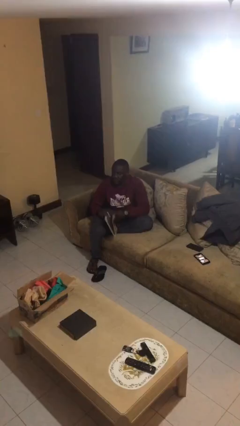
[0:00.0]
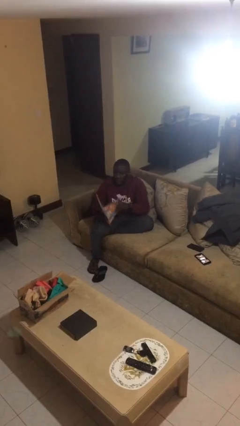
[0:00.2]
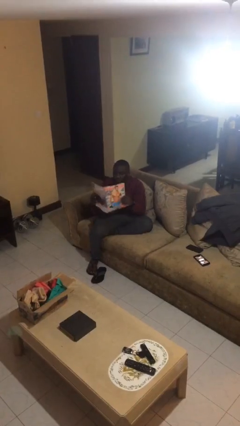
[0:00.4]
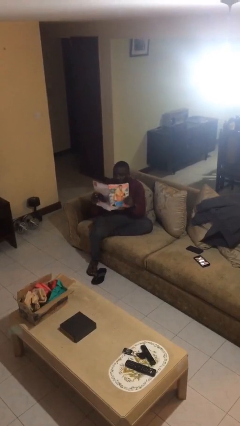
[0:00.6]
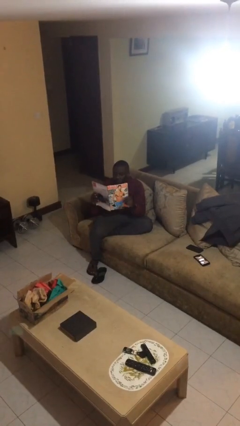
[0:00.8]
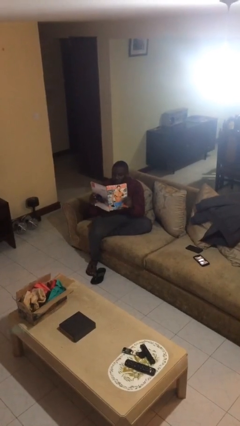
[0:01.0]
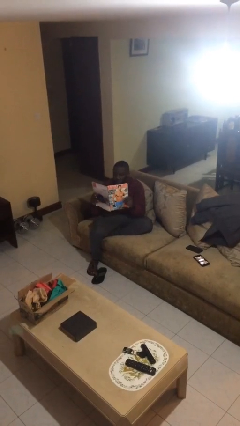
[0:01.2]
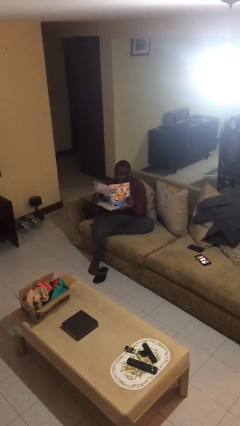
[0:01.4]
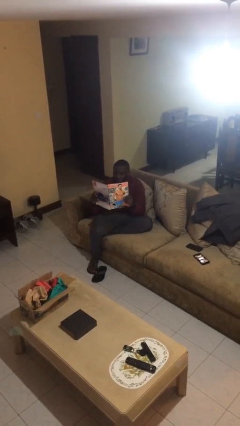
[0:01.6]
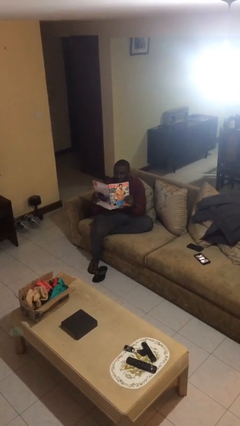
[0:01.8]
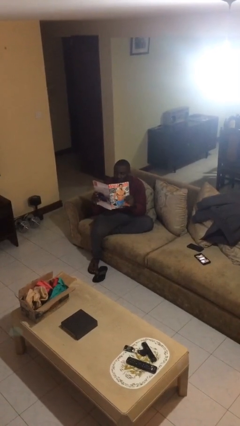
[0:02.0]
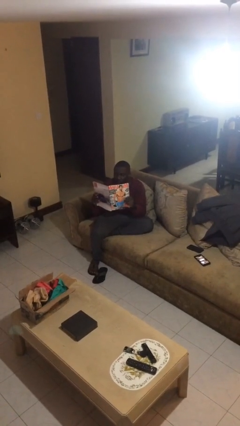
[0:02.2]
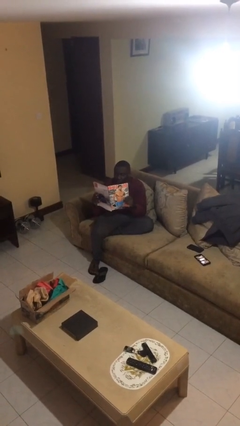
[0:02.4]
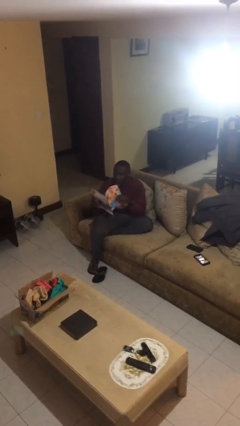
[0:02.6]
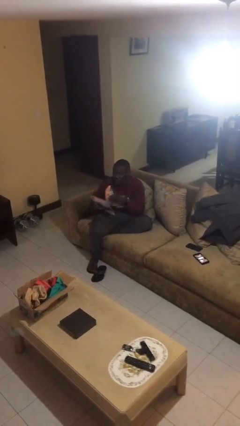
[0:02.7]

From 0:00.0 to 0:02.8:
person reads magazine

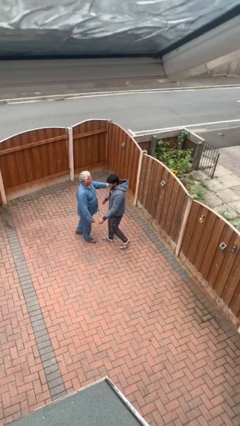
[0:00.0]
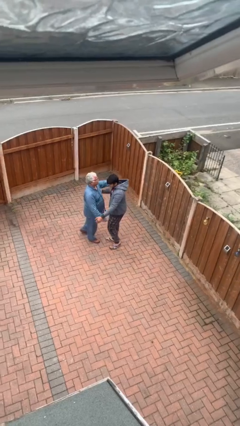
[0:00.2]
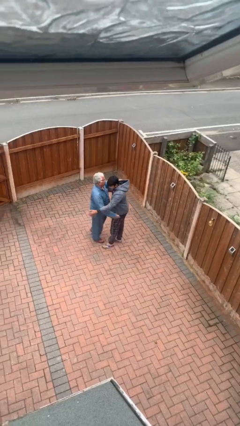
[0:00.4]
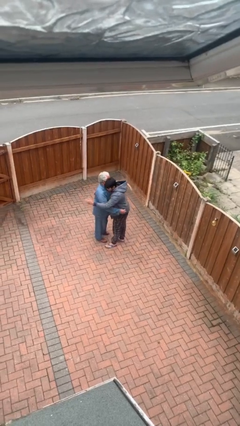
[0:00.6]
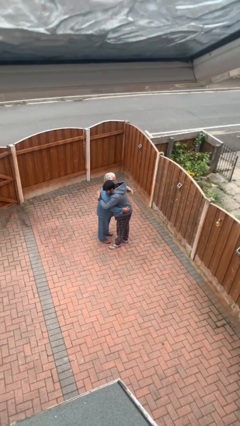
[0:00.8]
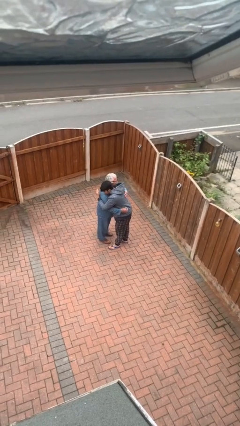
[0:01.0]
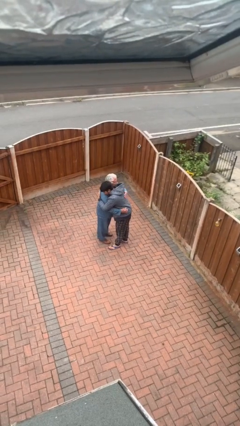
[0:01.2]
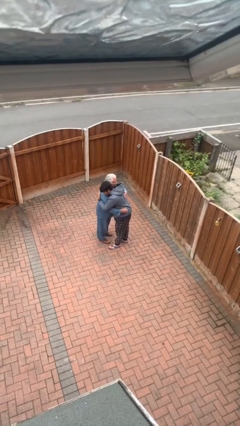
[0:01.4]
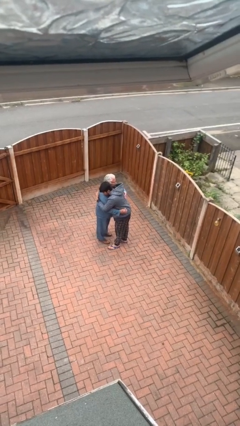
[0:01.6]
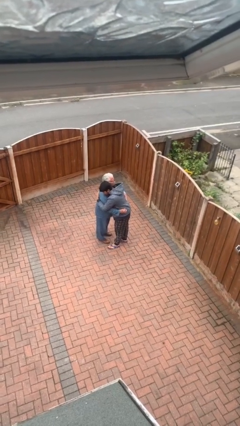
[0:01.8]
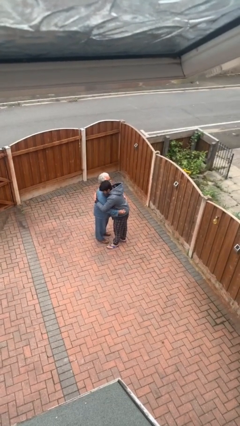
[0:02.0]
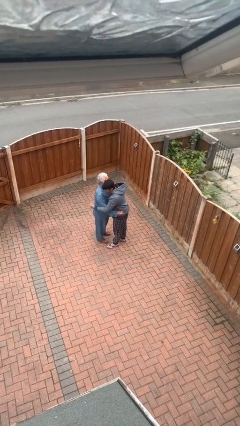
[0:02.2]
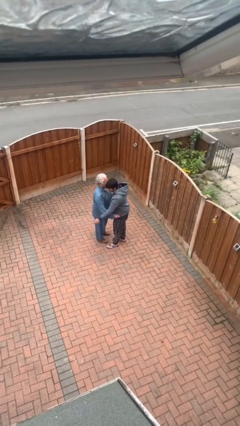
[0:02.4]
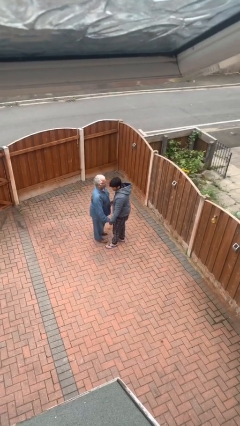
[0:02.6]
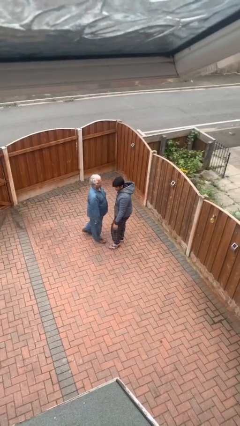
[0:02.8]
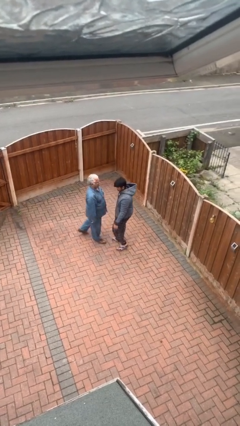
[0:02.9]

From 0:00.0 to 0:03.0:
person embraces person

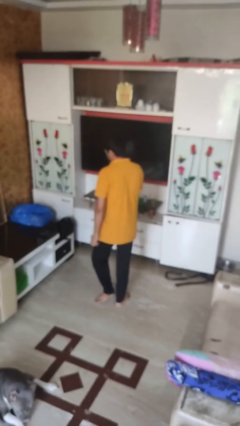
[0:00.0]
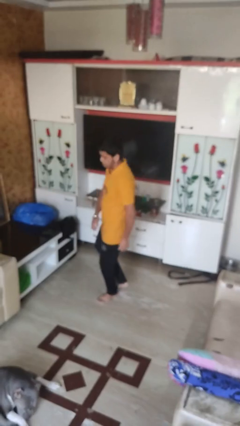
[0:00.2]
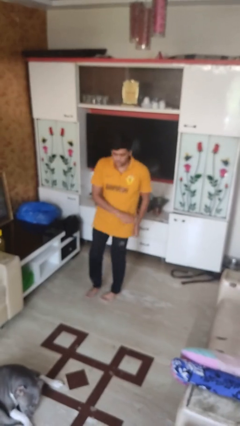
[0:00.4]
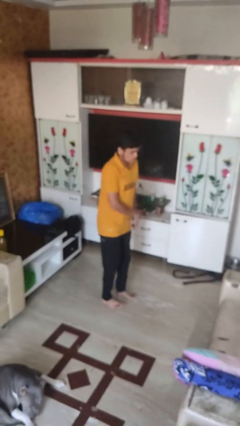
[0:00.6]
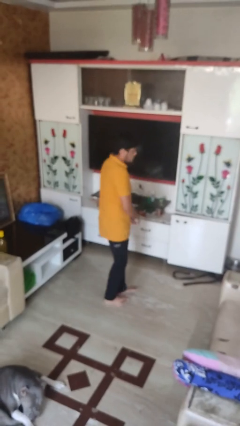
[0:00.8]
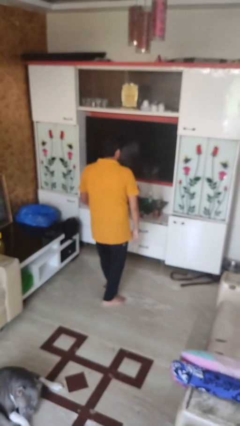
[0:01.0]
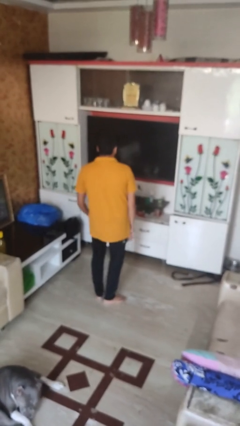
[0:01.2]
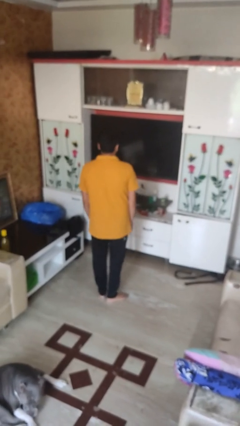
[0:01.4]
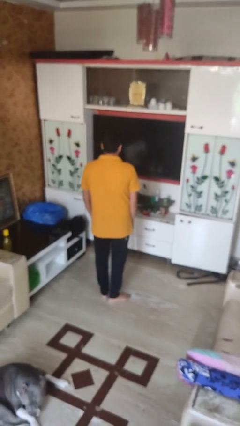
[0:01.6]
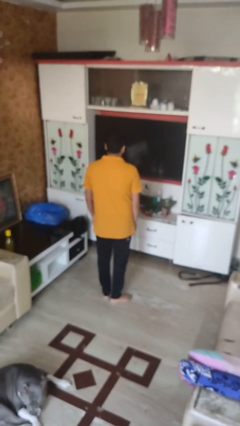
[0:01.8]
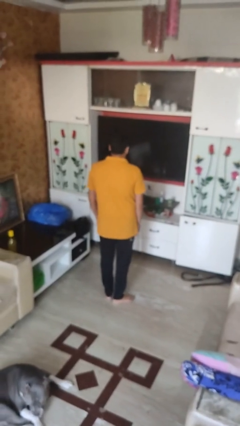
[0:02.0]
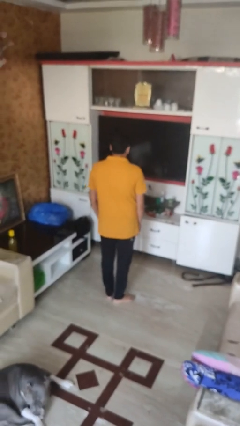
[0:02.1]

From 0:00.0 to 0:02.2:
person twirls

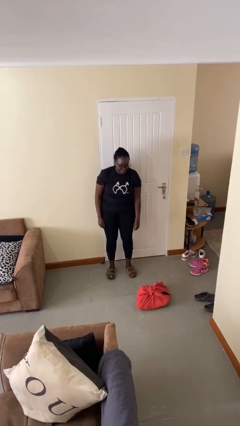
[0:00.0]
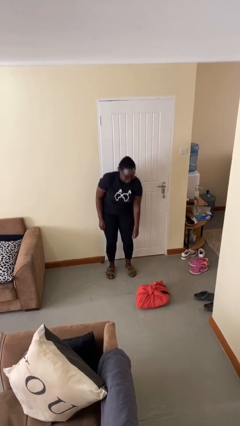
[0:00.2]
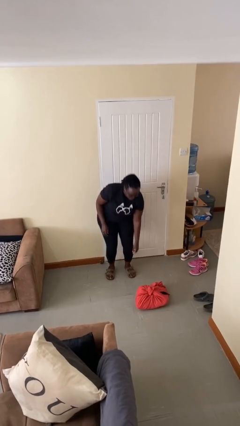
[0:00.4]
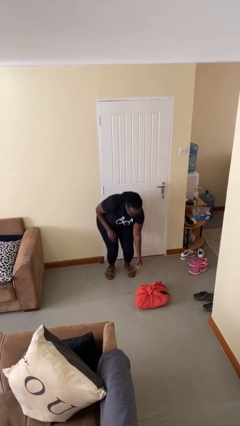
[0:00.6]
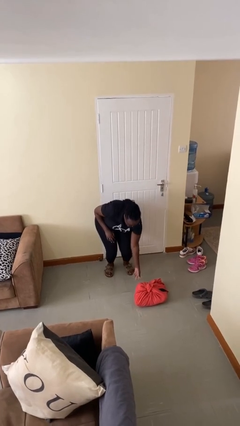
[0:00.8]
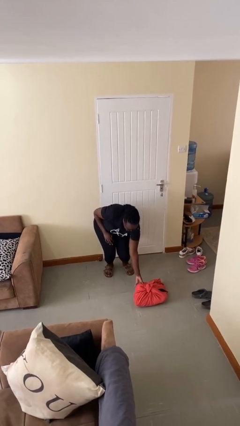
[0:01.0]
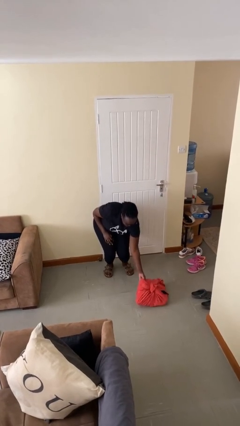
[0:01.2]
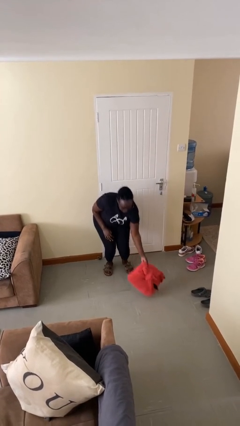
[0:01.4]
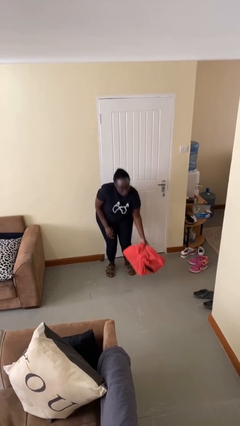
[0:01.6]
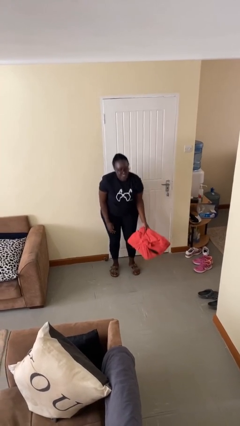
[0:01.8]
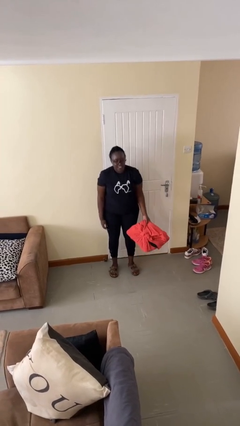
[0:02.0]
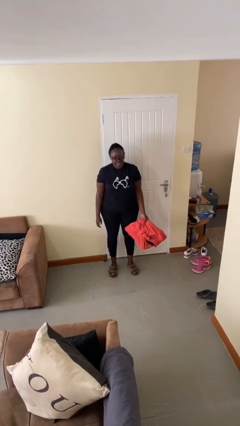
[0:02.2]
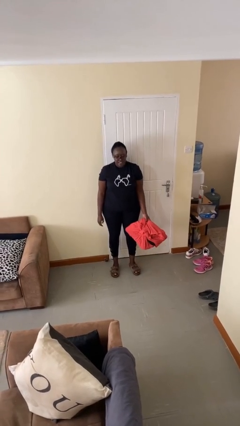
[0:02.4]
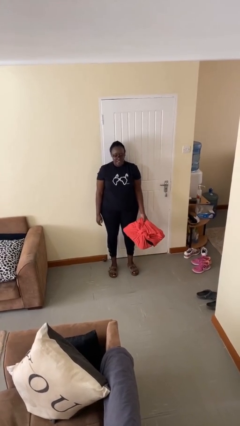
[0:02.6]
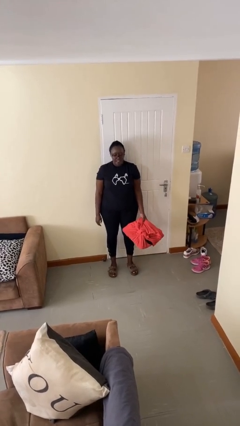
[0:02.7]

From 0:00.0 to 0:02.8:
person picks up object from floor

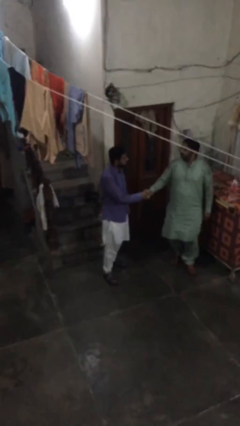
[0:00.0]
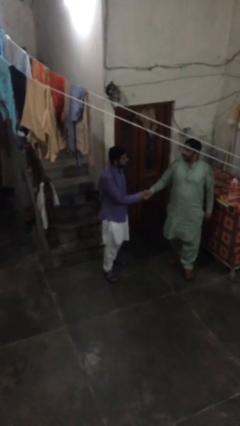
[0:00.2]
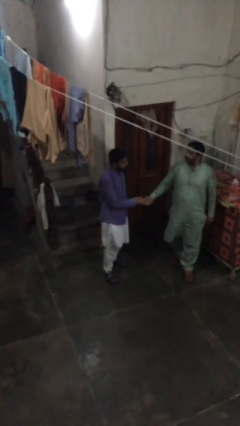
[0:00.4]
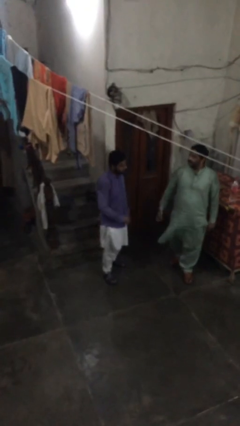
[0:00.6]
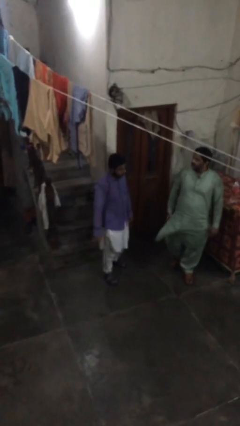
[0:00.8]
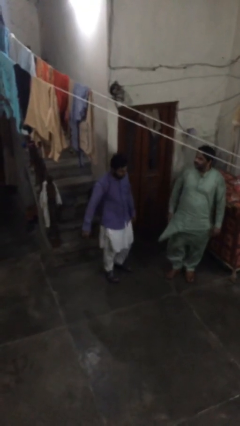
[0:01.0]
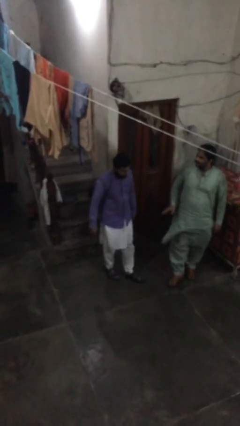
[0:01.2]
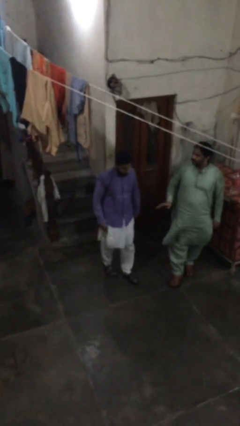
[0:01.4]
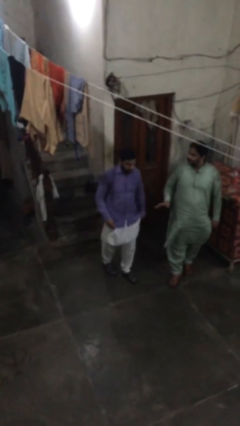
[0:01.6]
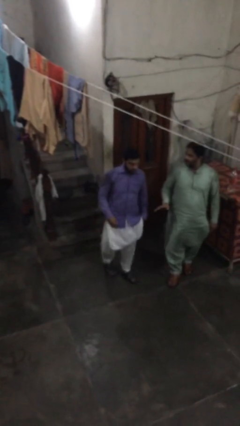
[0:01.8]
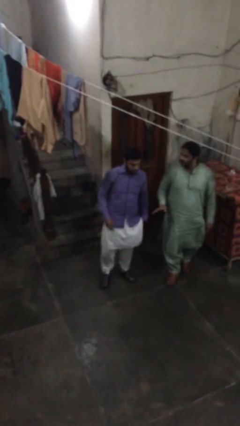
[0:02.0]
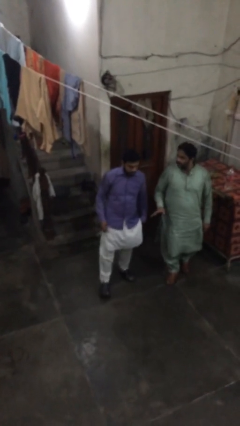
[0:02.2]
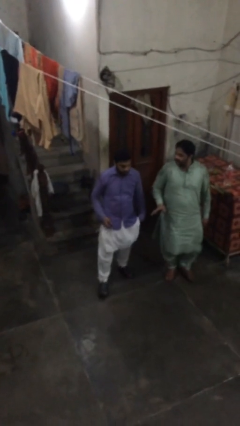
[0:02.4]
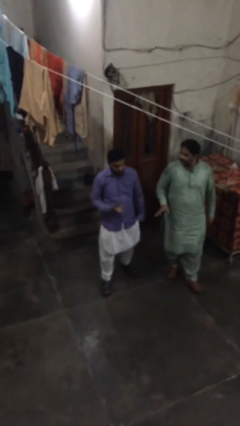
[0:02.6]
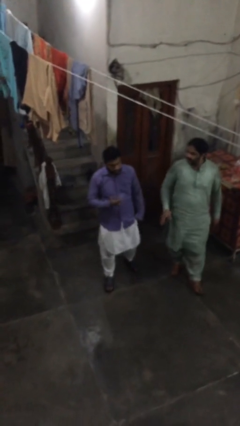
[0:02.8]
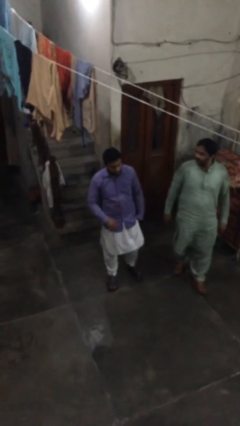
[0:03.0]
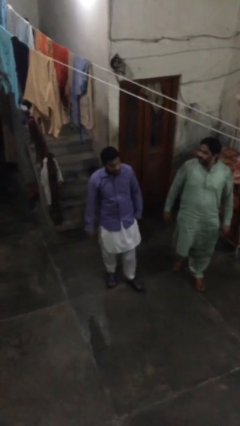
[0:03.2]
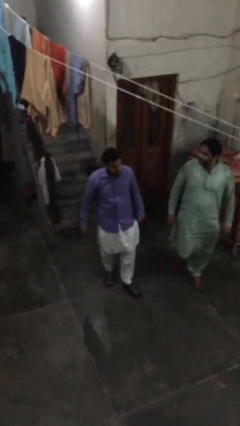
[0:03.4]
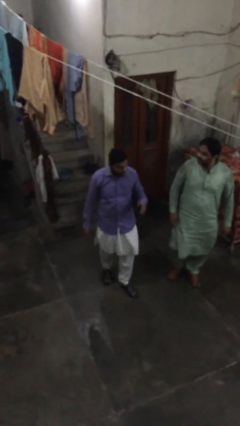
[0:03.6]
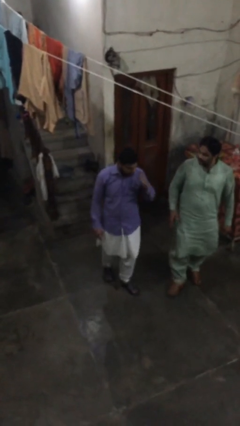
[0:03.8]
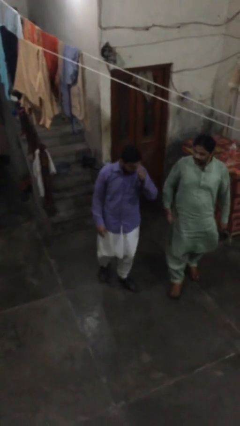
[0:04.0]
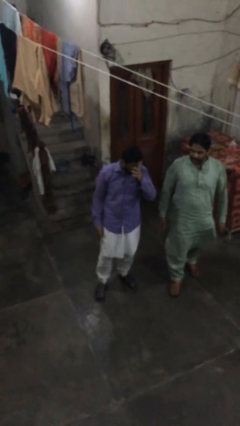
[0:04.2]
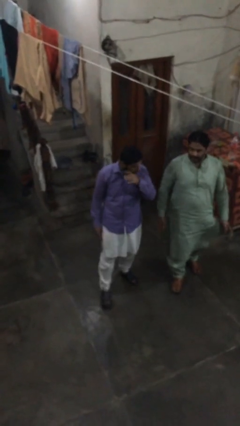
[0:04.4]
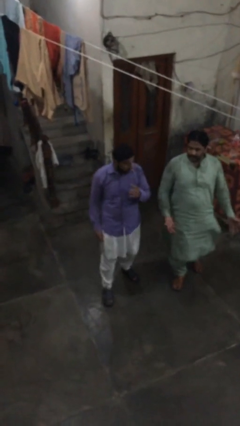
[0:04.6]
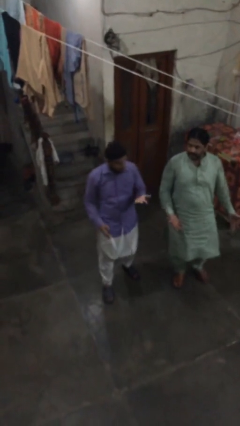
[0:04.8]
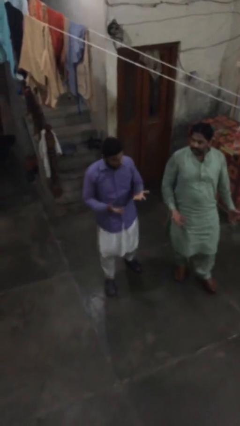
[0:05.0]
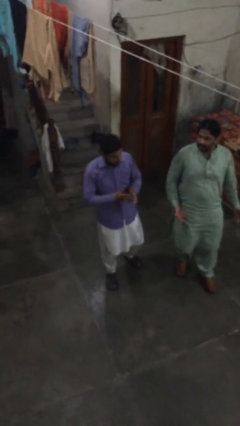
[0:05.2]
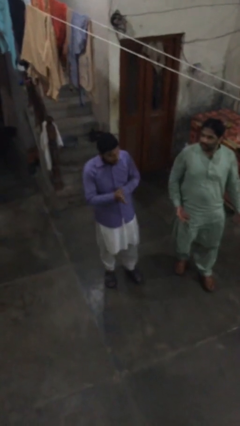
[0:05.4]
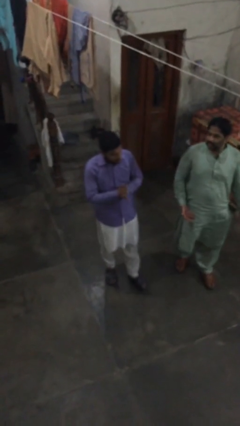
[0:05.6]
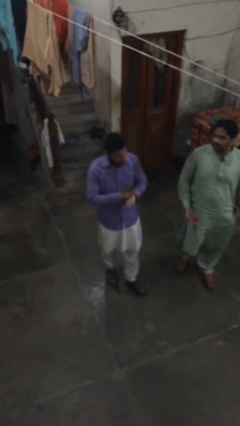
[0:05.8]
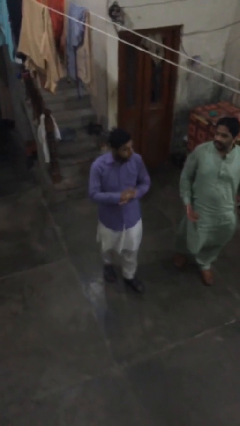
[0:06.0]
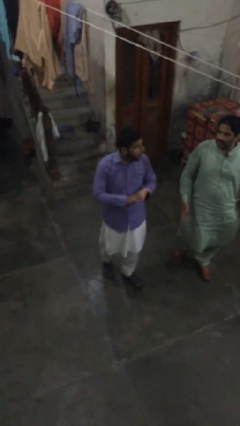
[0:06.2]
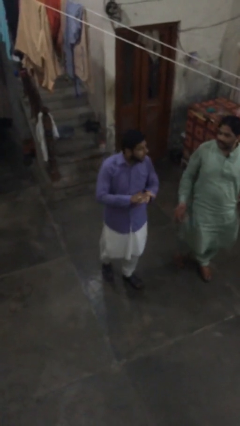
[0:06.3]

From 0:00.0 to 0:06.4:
person talks to person

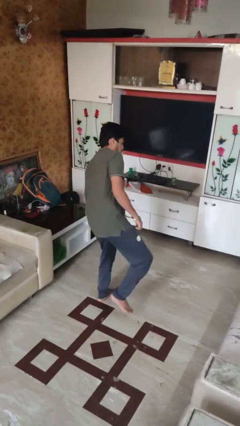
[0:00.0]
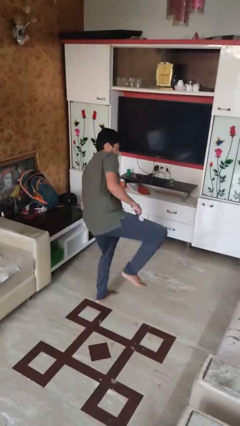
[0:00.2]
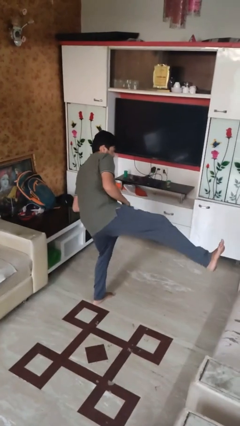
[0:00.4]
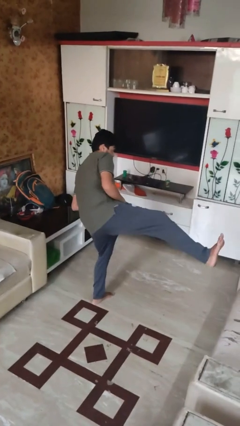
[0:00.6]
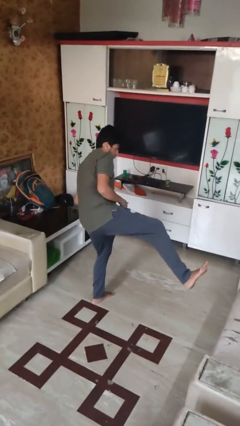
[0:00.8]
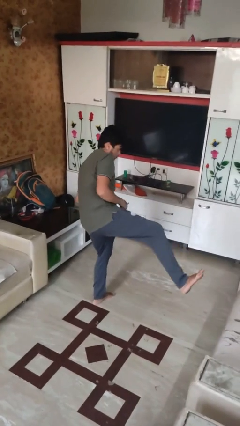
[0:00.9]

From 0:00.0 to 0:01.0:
person karate kicks
